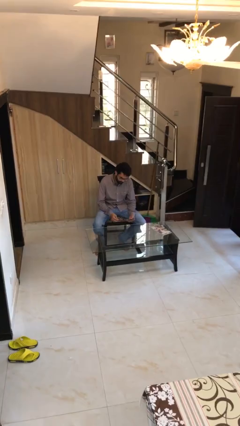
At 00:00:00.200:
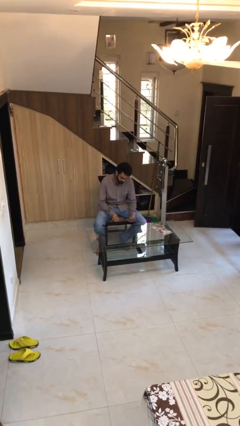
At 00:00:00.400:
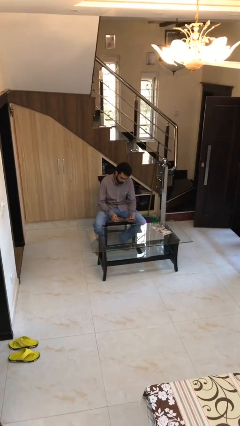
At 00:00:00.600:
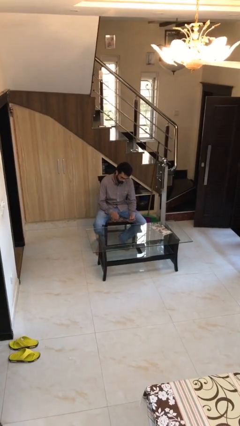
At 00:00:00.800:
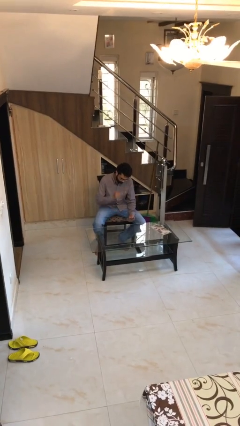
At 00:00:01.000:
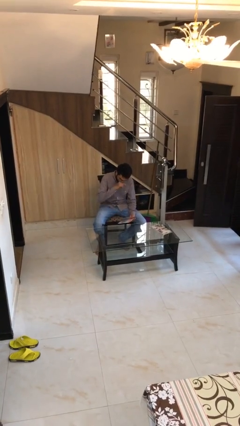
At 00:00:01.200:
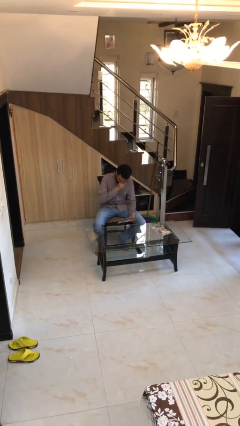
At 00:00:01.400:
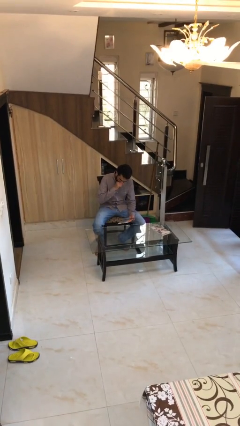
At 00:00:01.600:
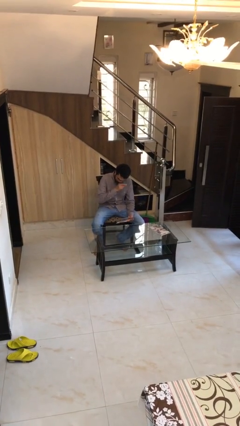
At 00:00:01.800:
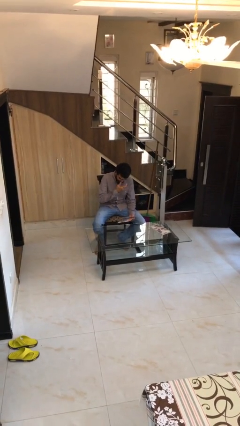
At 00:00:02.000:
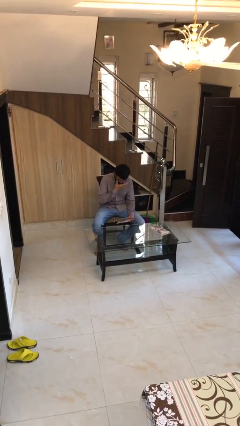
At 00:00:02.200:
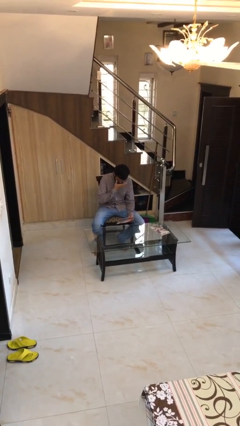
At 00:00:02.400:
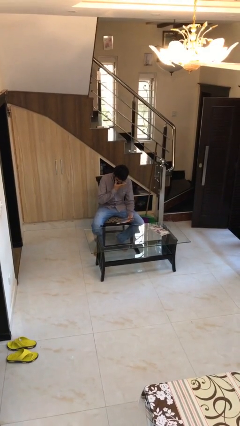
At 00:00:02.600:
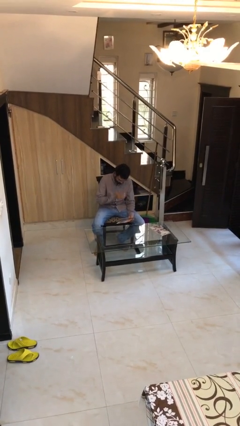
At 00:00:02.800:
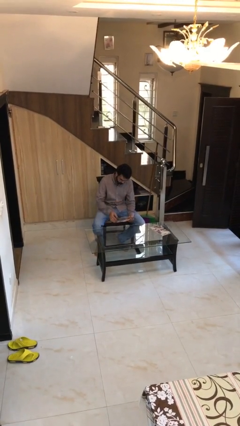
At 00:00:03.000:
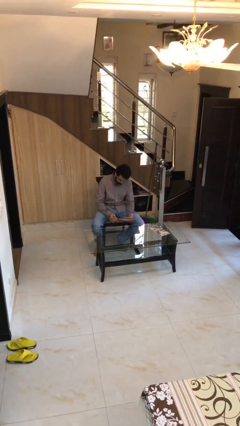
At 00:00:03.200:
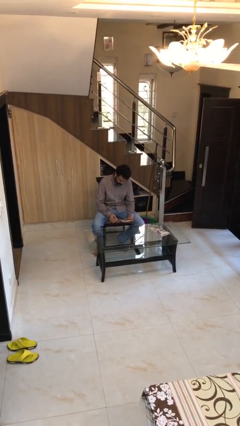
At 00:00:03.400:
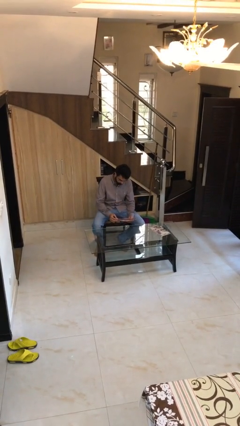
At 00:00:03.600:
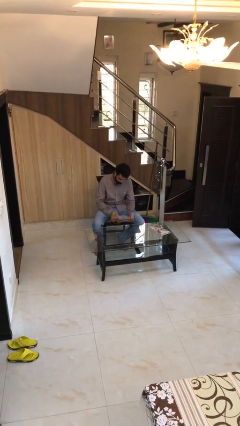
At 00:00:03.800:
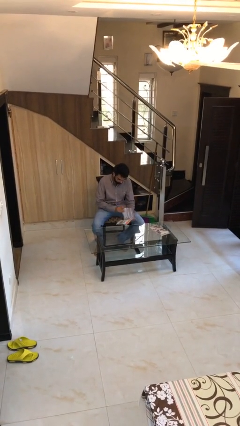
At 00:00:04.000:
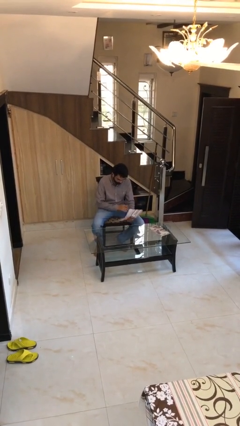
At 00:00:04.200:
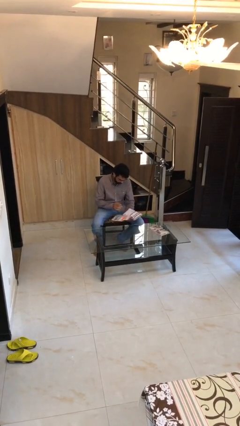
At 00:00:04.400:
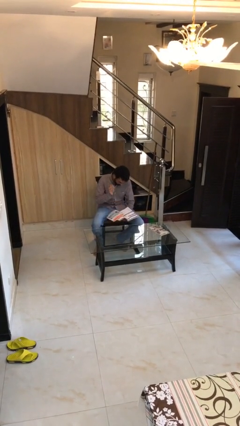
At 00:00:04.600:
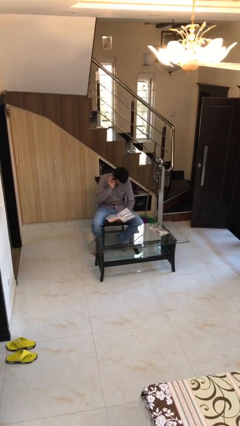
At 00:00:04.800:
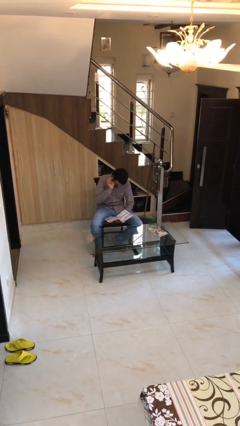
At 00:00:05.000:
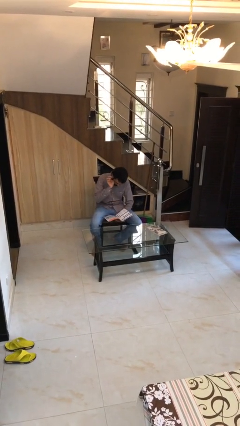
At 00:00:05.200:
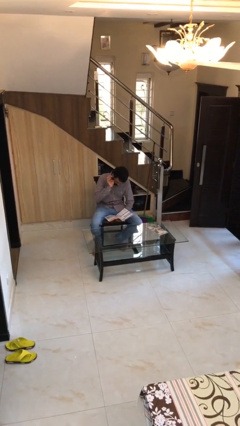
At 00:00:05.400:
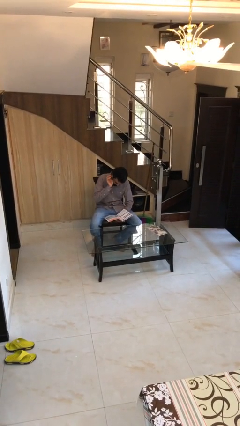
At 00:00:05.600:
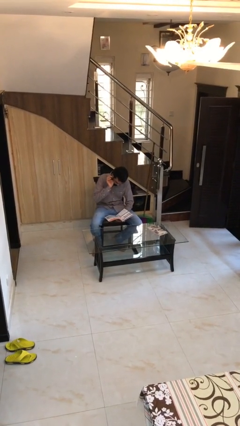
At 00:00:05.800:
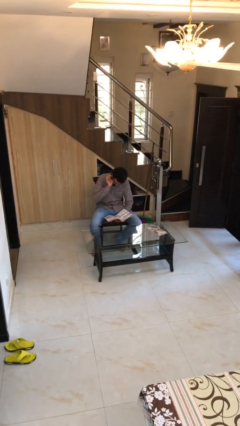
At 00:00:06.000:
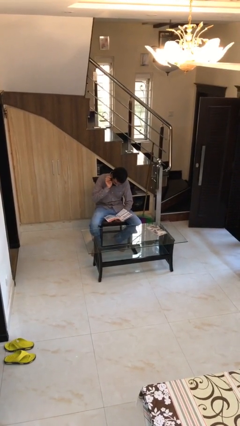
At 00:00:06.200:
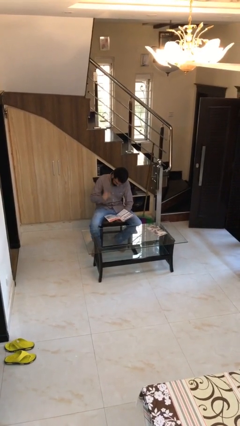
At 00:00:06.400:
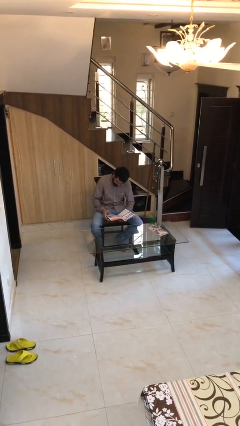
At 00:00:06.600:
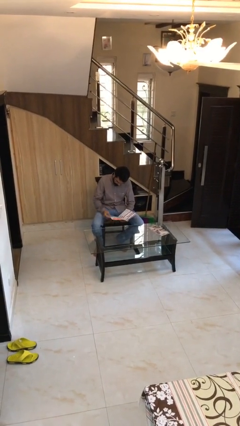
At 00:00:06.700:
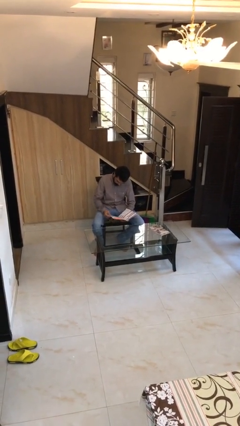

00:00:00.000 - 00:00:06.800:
person reads document

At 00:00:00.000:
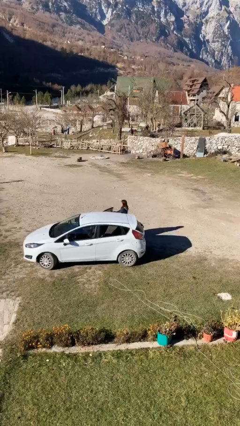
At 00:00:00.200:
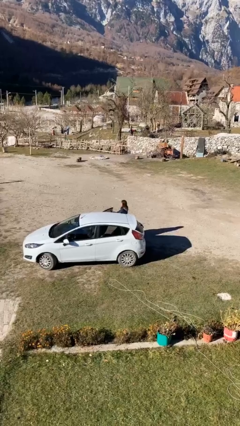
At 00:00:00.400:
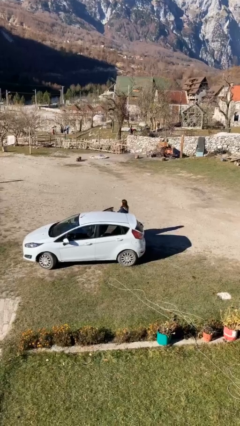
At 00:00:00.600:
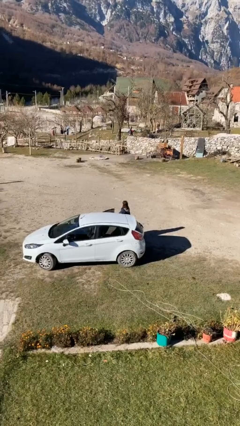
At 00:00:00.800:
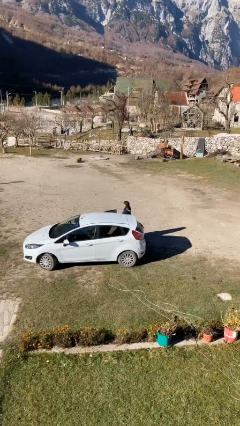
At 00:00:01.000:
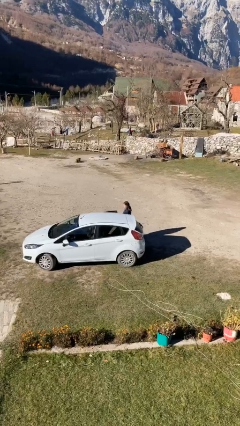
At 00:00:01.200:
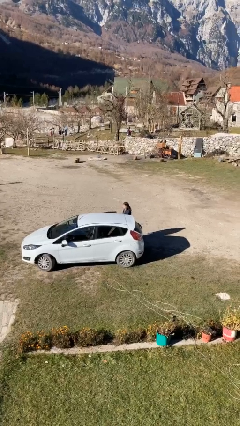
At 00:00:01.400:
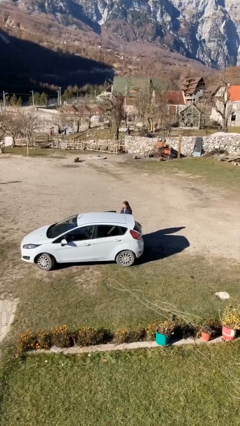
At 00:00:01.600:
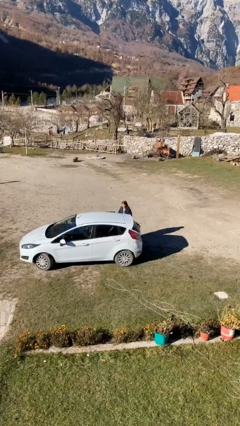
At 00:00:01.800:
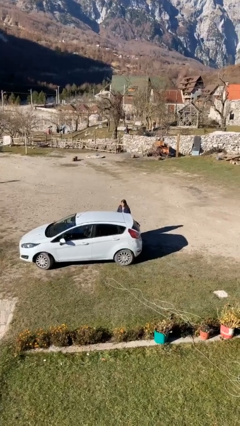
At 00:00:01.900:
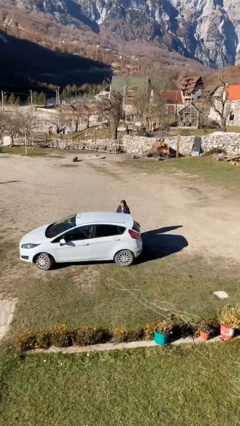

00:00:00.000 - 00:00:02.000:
person closes car door

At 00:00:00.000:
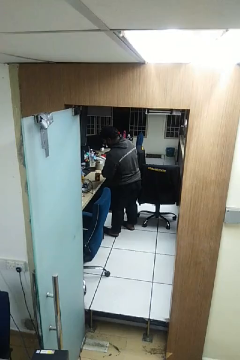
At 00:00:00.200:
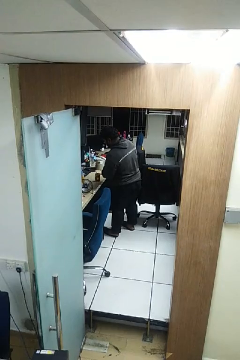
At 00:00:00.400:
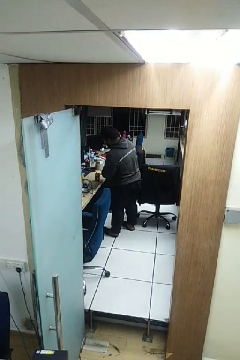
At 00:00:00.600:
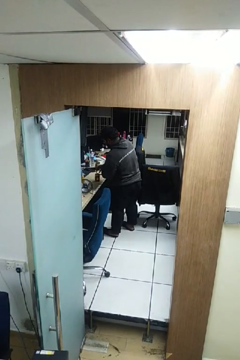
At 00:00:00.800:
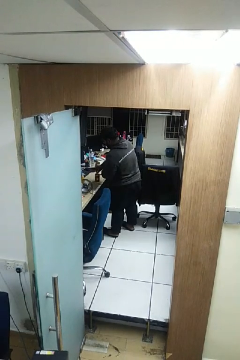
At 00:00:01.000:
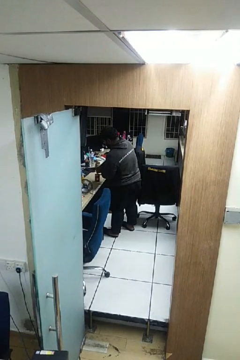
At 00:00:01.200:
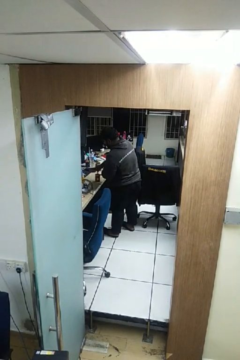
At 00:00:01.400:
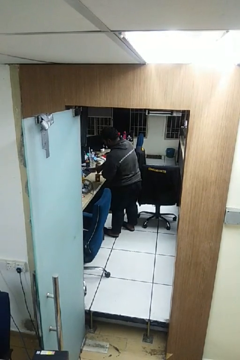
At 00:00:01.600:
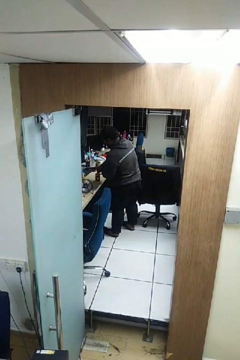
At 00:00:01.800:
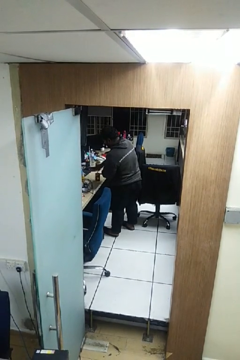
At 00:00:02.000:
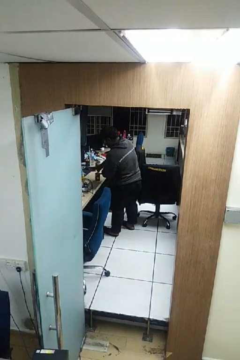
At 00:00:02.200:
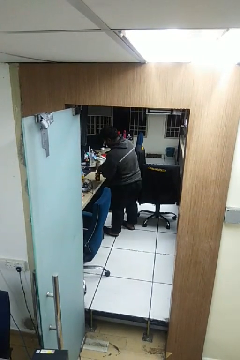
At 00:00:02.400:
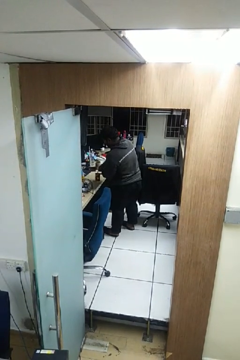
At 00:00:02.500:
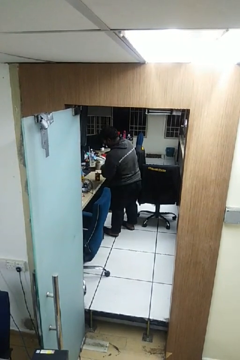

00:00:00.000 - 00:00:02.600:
person opens can with can opener

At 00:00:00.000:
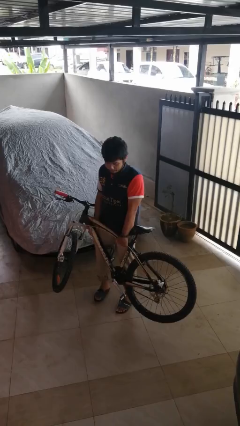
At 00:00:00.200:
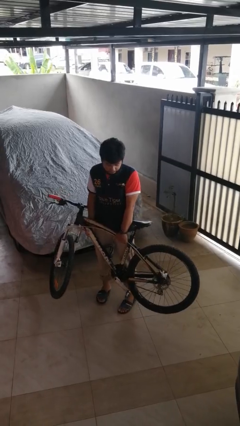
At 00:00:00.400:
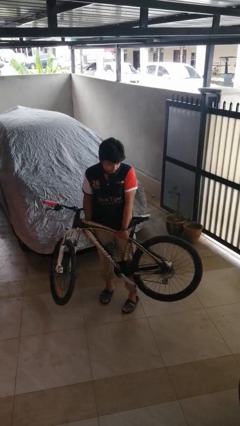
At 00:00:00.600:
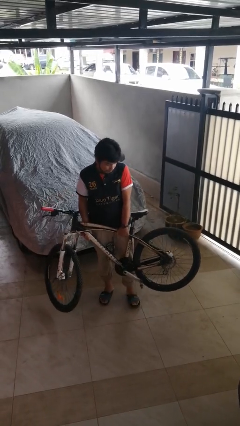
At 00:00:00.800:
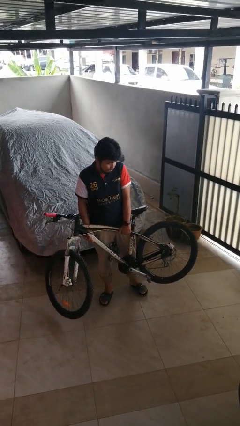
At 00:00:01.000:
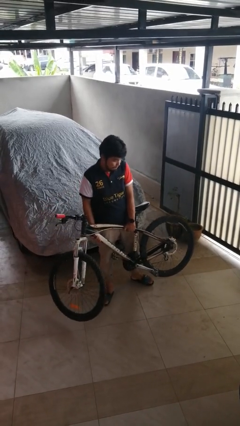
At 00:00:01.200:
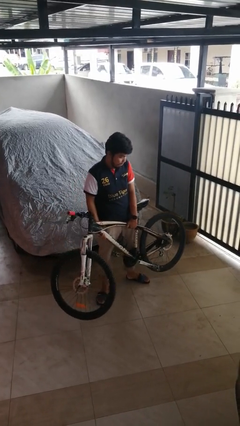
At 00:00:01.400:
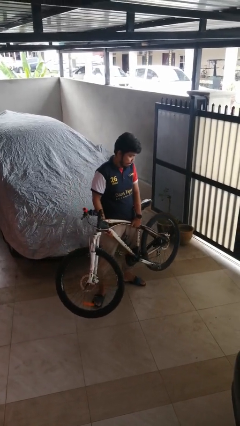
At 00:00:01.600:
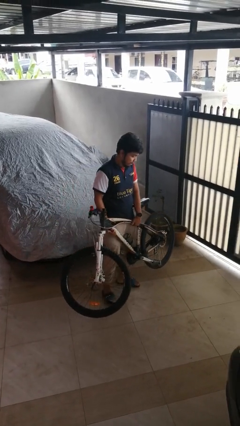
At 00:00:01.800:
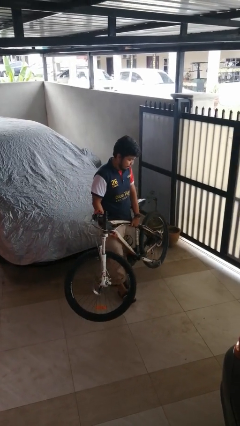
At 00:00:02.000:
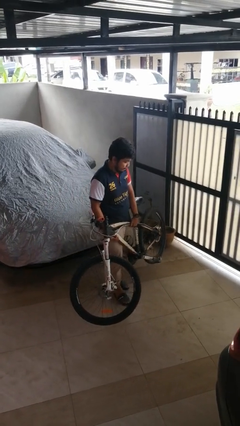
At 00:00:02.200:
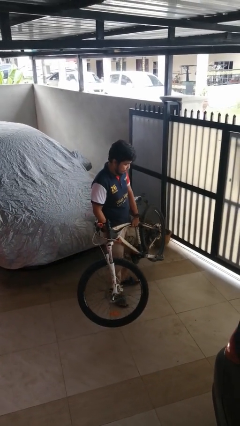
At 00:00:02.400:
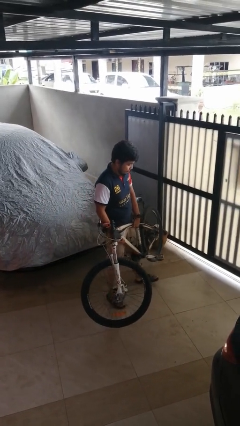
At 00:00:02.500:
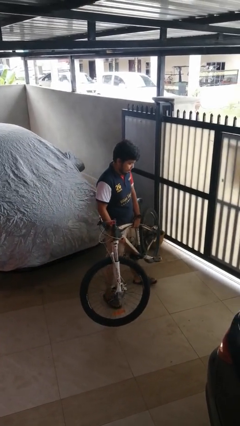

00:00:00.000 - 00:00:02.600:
person carries bicycle

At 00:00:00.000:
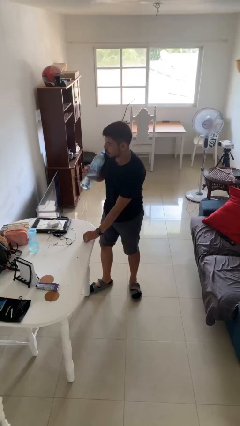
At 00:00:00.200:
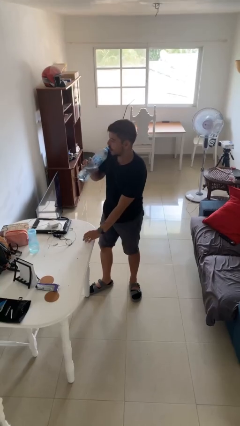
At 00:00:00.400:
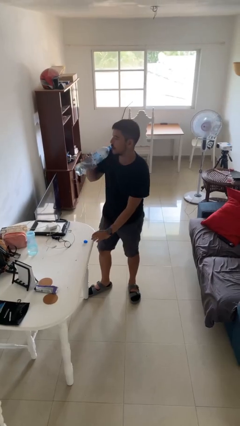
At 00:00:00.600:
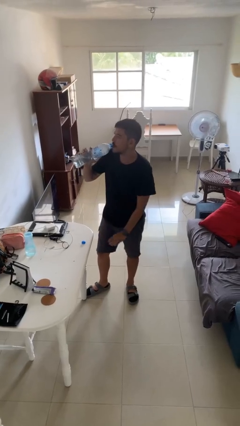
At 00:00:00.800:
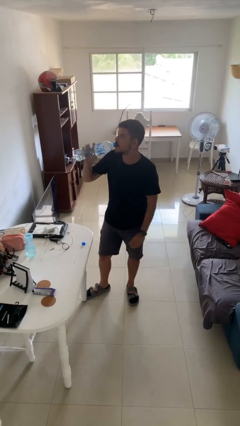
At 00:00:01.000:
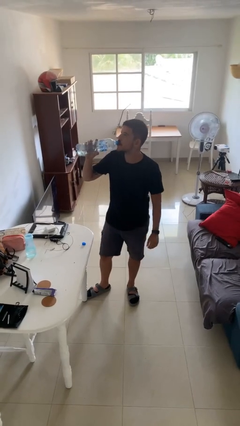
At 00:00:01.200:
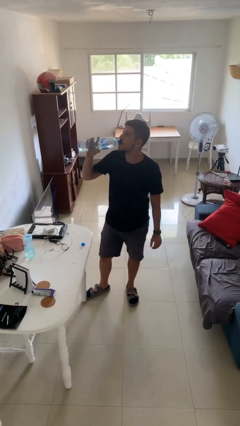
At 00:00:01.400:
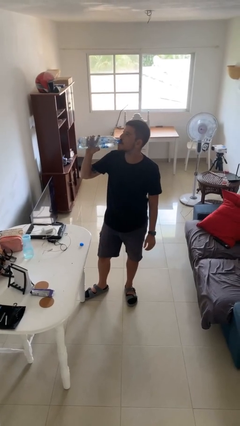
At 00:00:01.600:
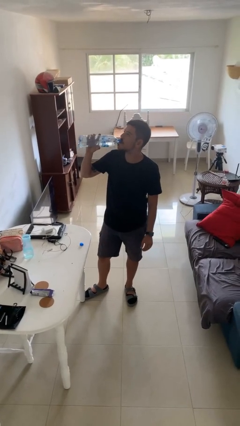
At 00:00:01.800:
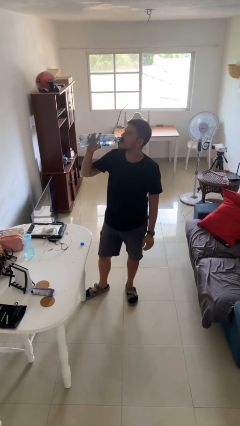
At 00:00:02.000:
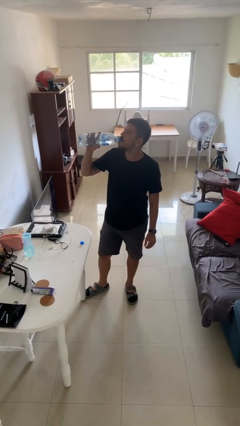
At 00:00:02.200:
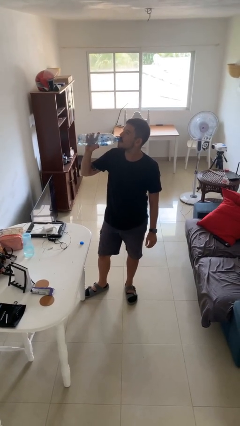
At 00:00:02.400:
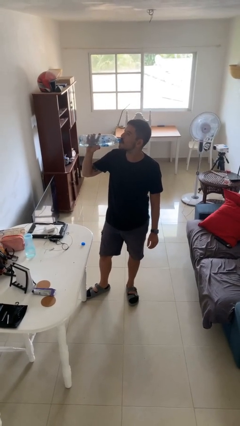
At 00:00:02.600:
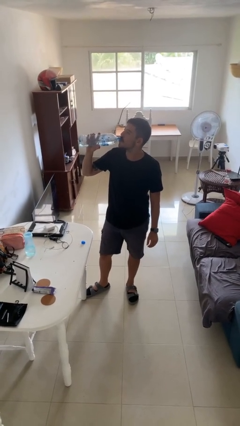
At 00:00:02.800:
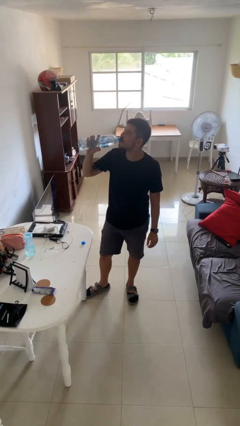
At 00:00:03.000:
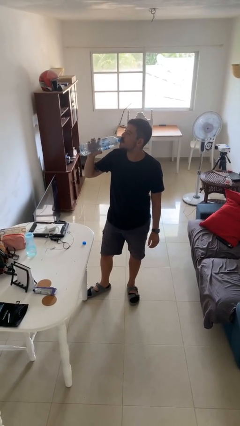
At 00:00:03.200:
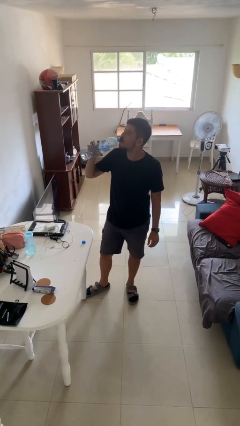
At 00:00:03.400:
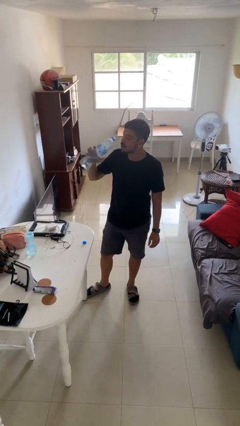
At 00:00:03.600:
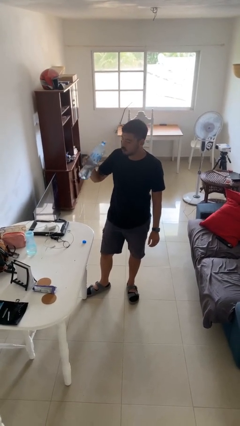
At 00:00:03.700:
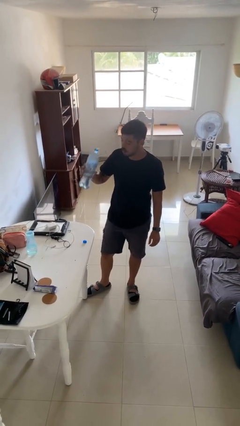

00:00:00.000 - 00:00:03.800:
person drinks from bottle
